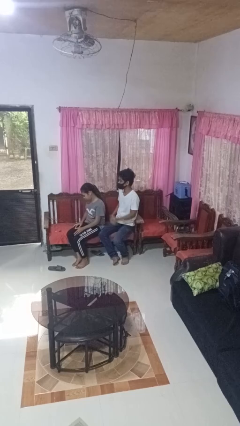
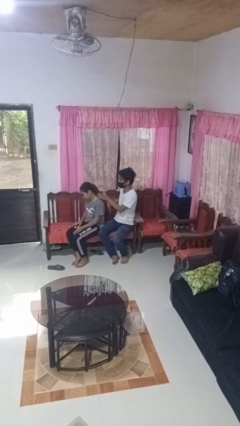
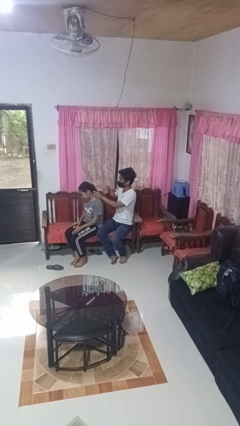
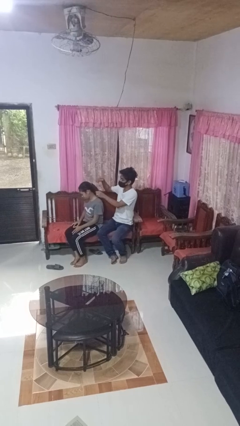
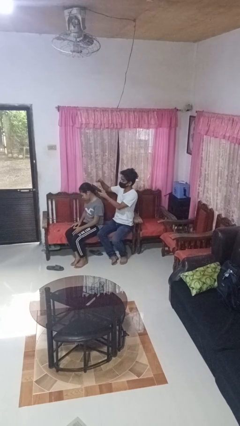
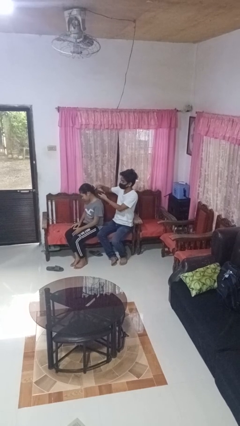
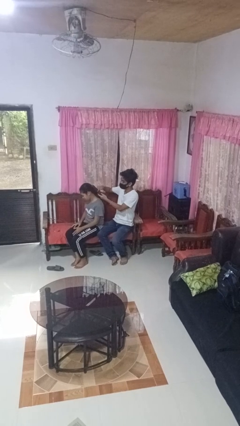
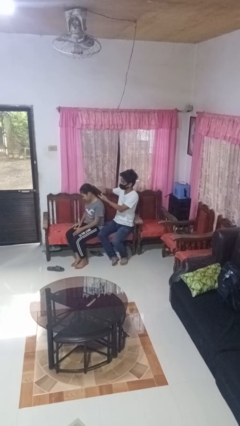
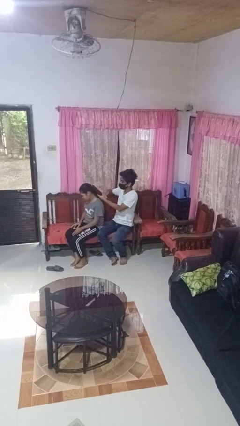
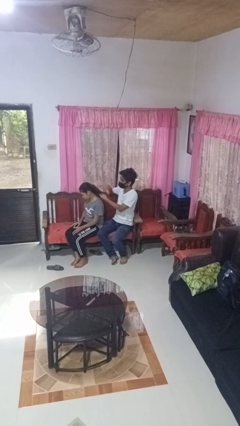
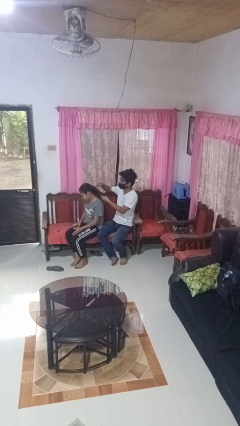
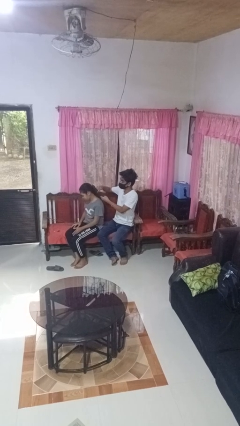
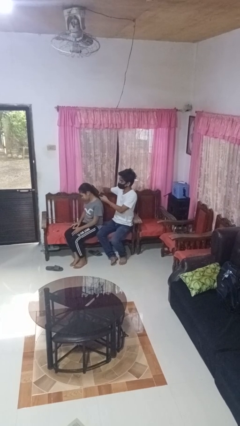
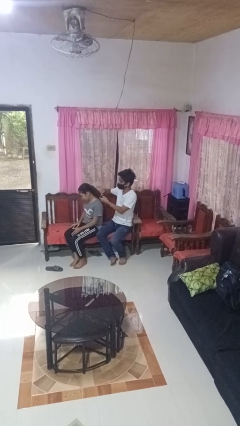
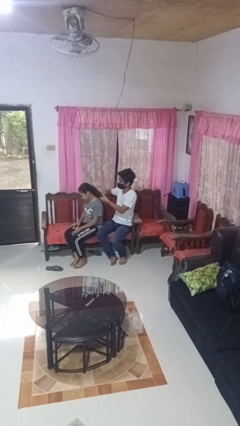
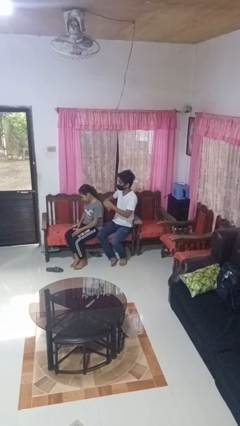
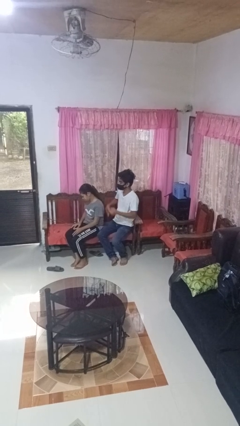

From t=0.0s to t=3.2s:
person brushes hair of person

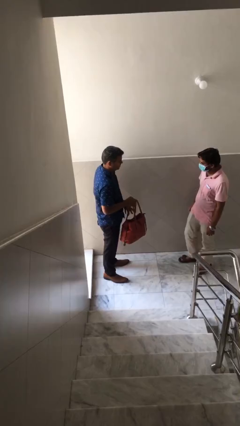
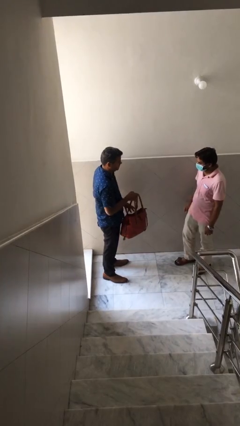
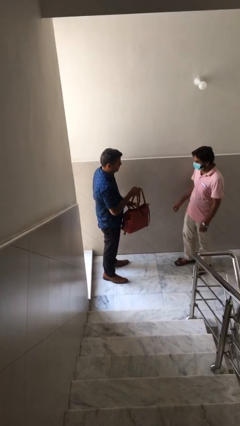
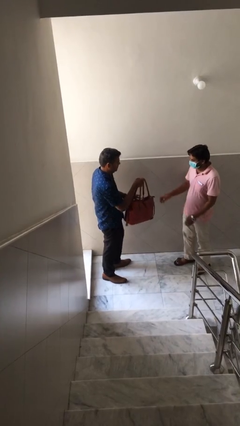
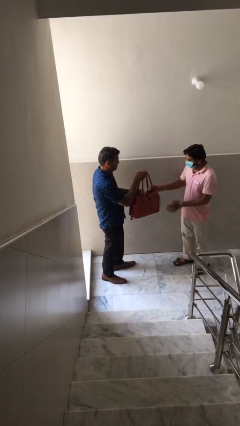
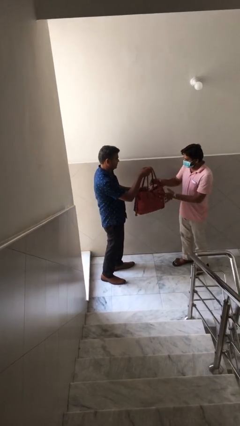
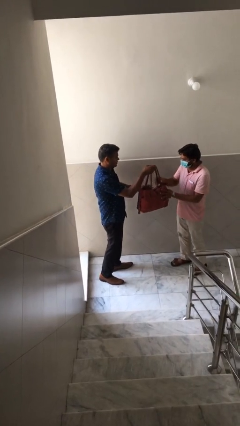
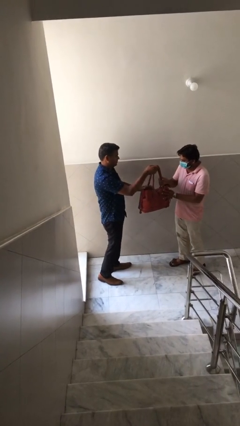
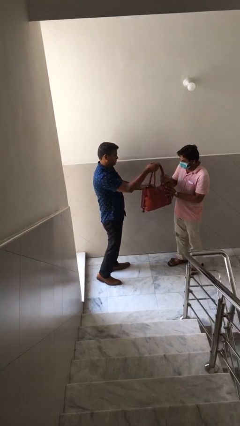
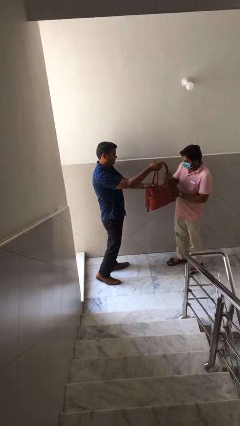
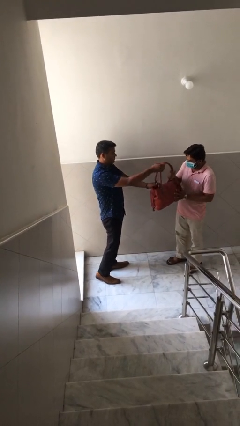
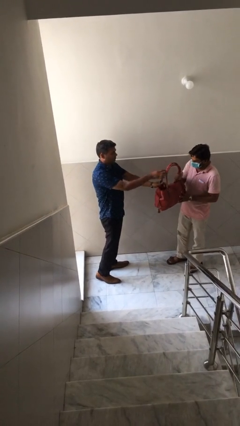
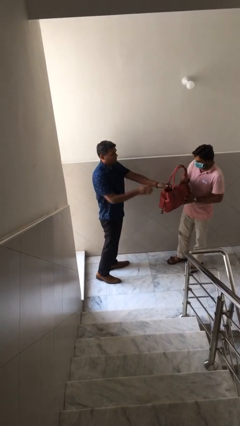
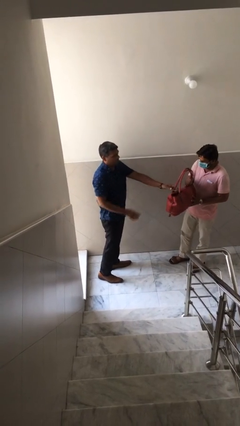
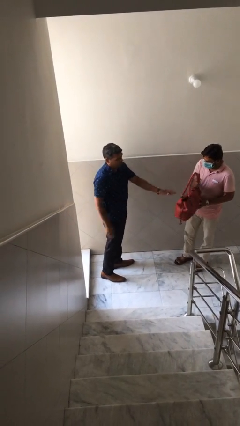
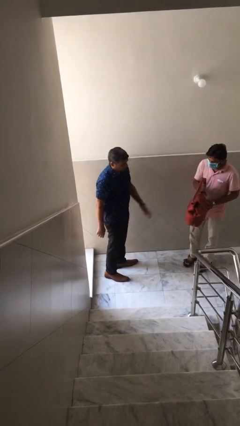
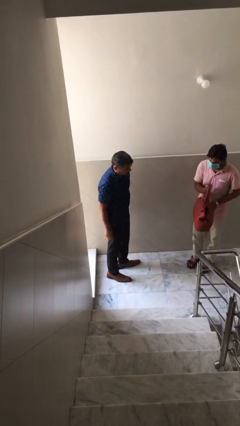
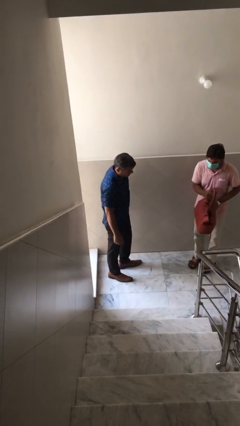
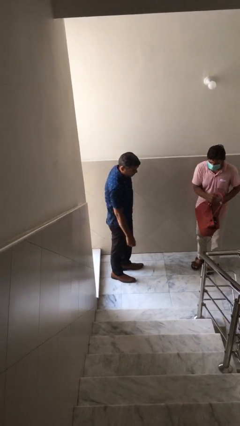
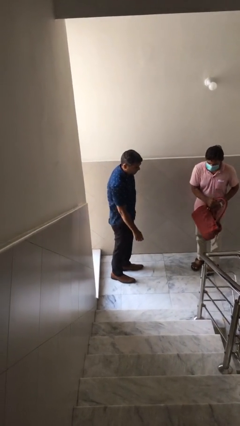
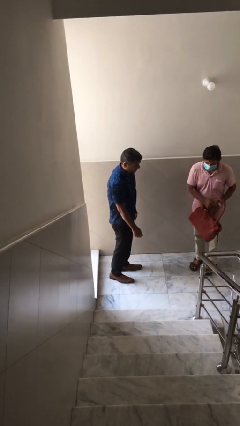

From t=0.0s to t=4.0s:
person transfers object to person

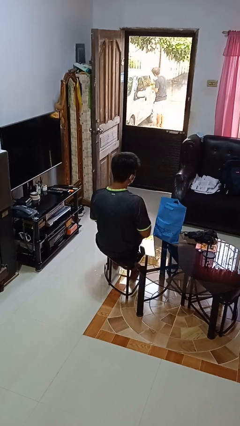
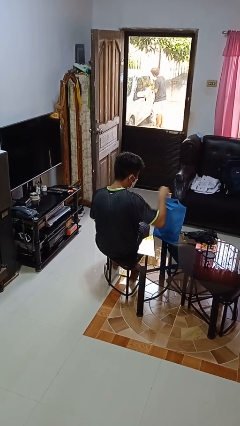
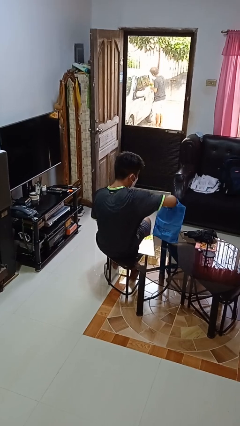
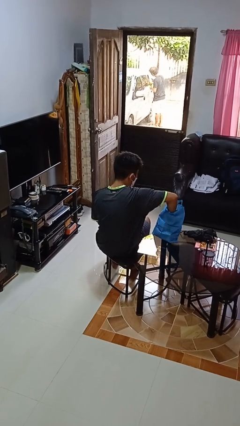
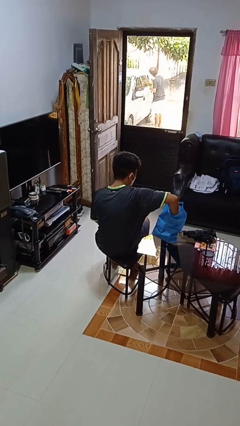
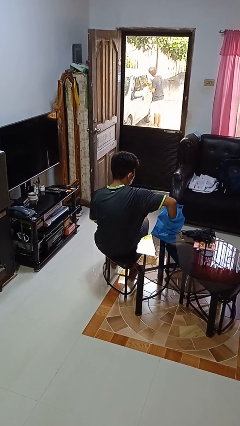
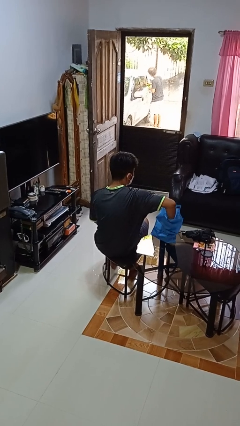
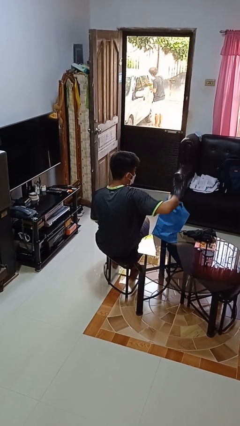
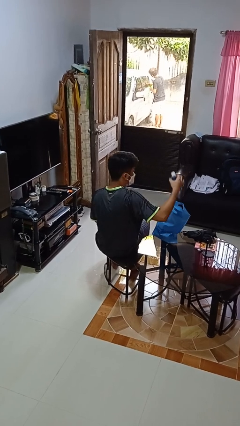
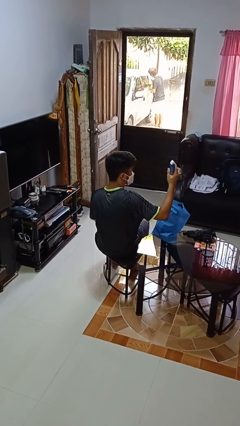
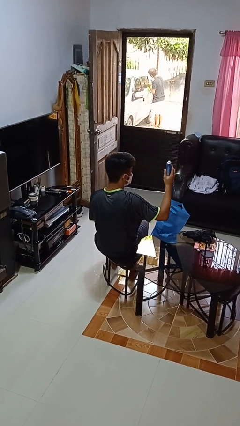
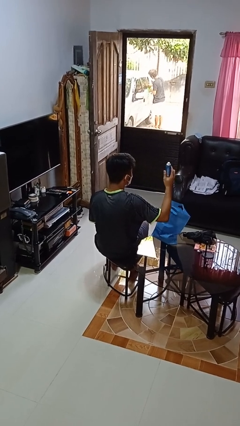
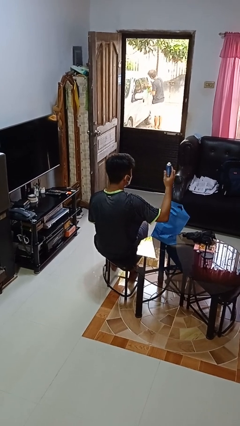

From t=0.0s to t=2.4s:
person takes object from bag

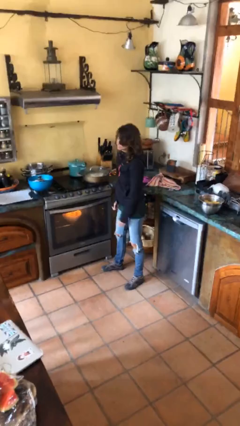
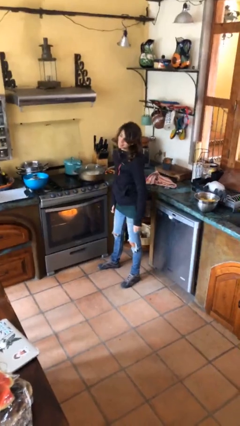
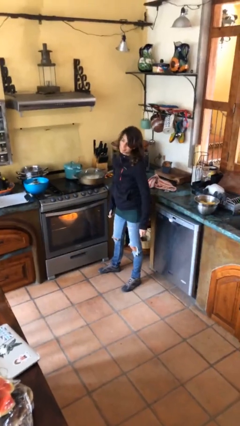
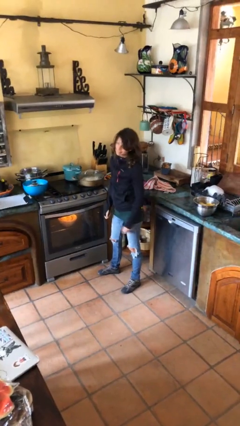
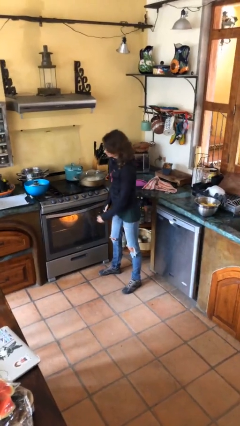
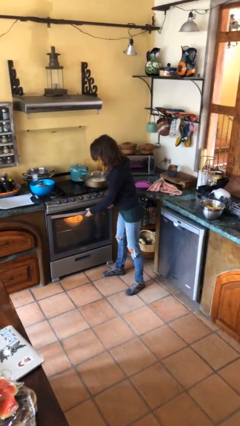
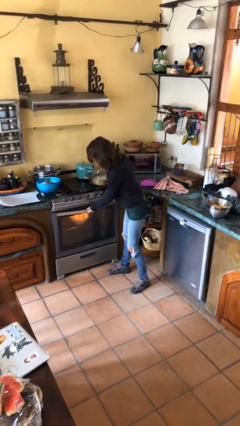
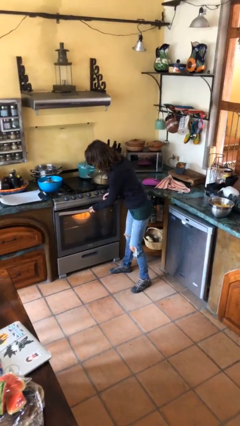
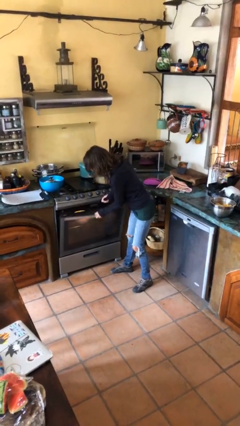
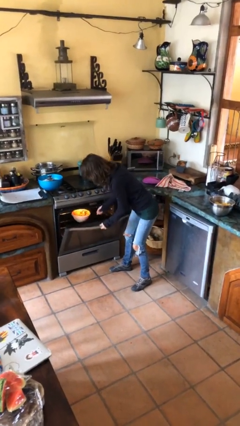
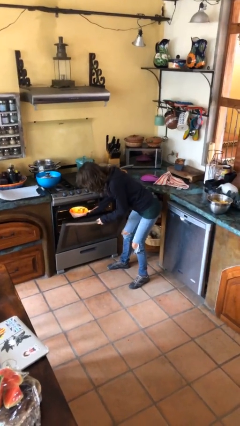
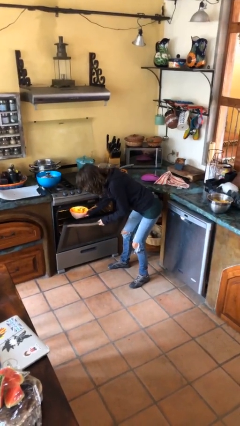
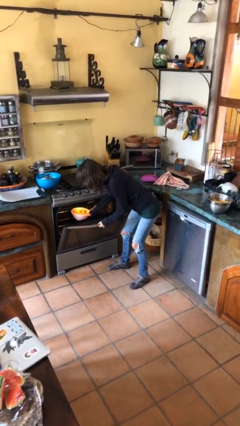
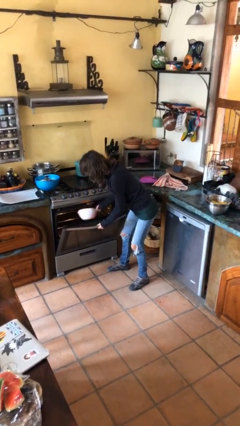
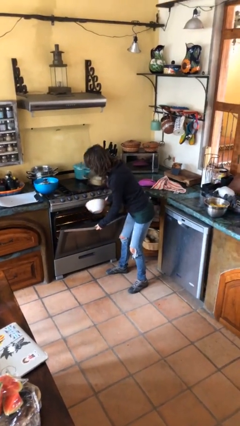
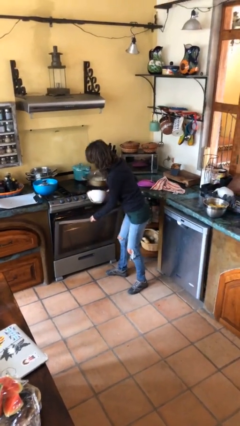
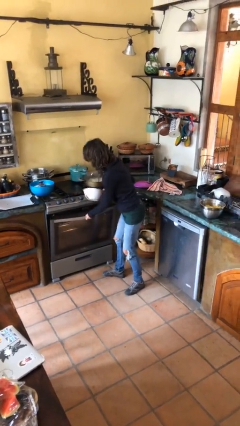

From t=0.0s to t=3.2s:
person takes object from oven

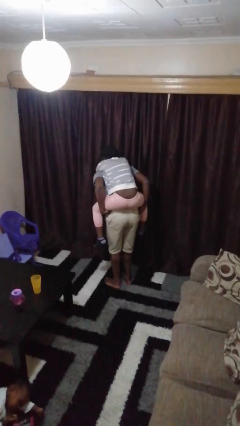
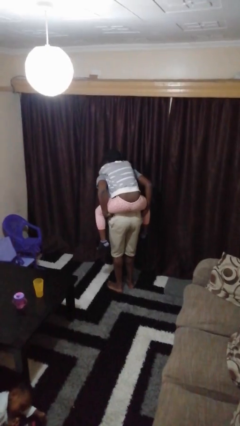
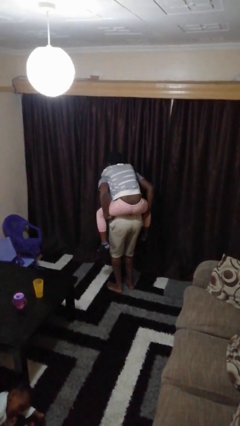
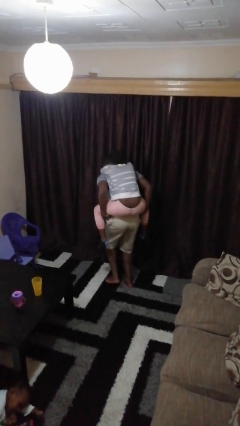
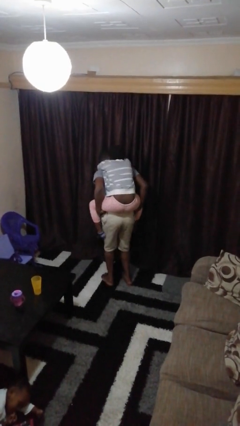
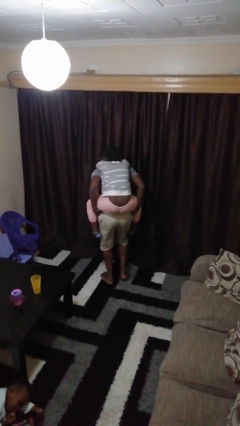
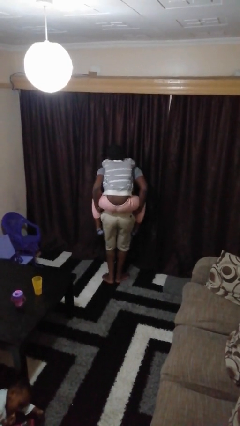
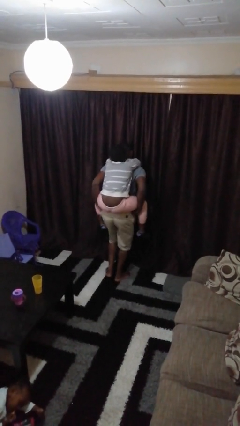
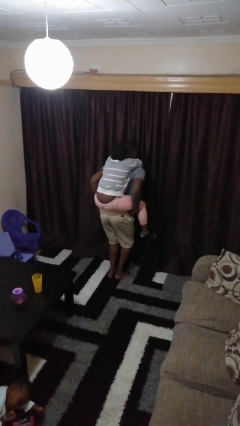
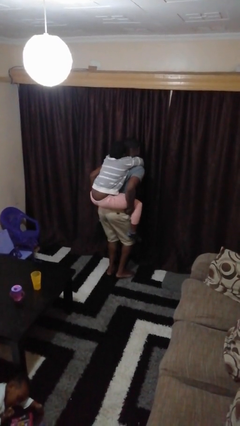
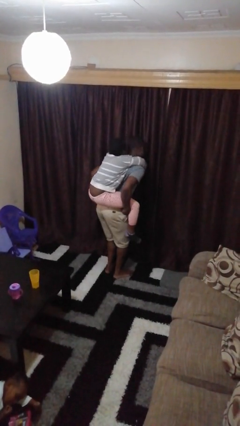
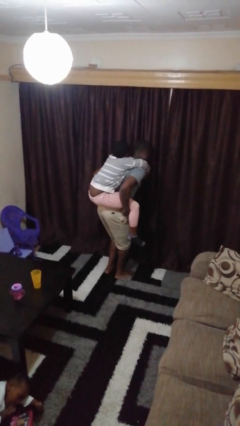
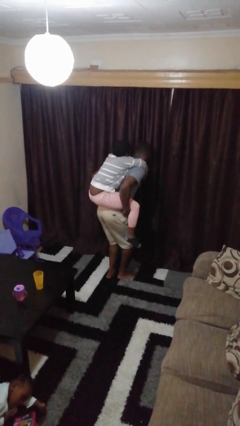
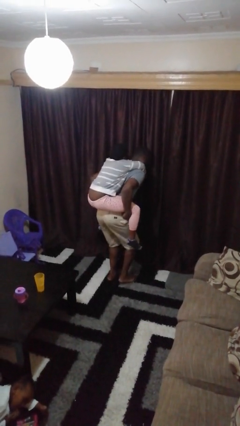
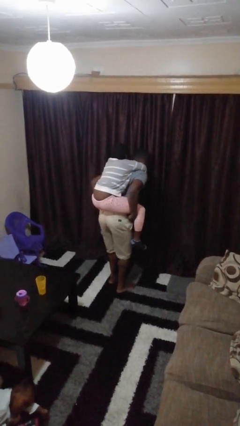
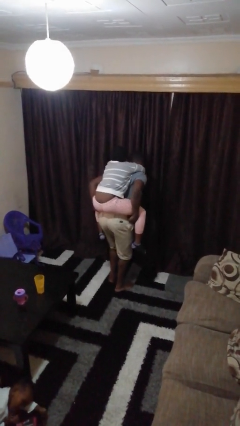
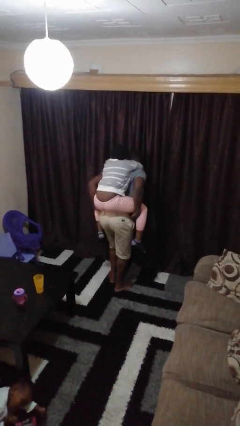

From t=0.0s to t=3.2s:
person carries person on back

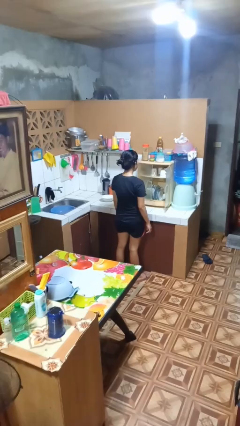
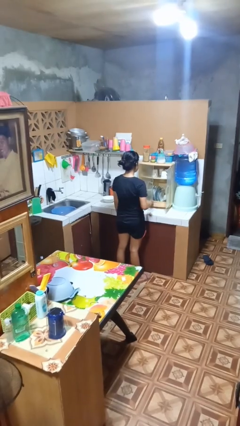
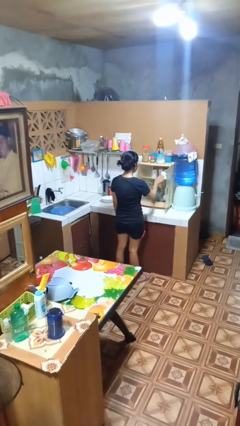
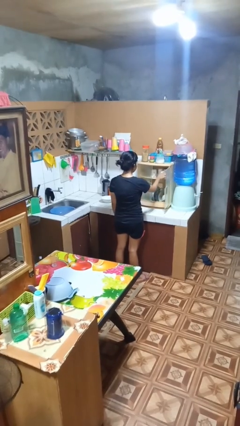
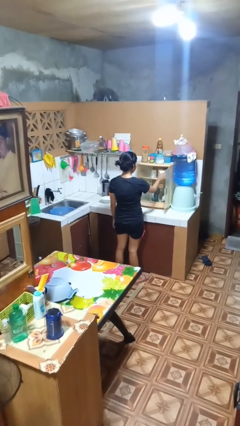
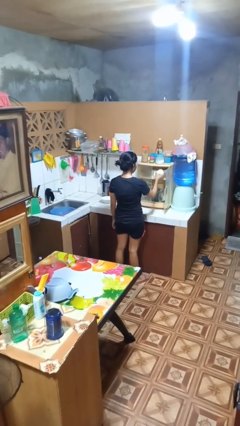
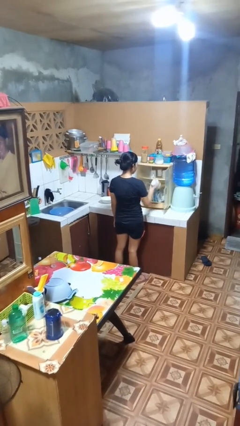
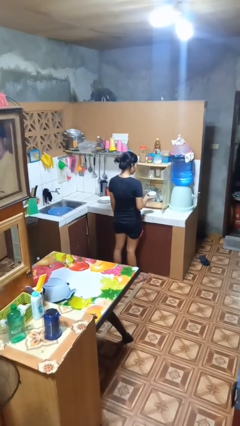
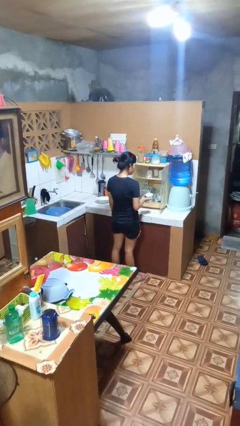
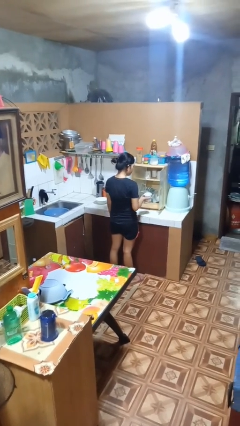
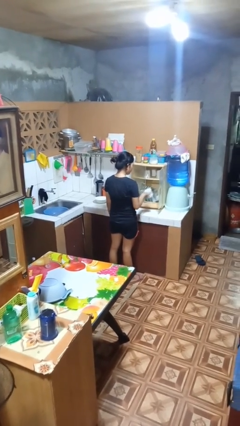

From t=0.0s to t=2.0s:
person takes object from kitchen drawer
